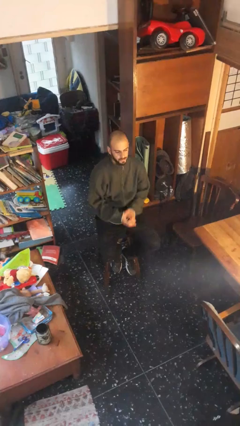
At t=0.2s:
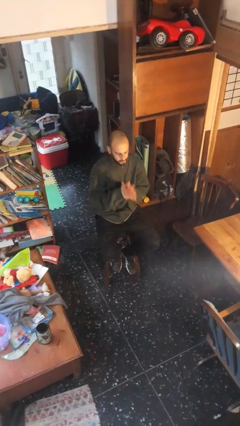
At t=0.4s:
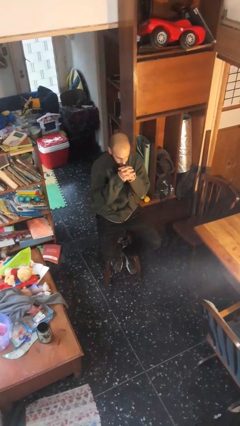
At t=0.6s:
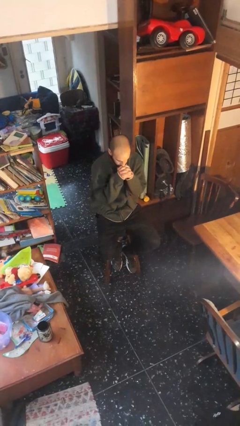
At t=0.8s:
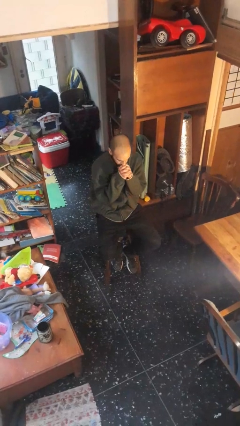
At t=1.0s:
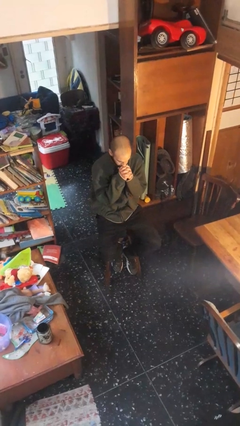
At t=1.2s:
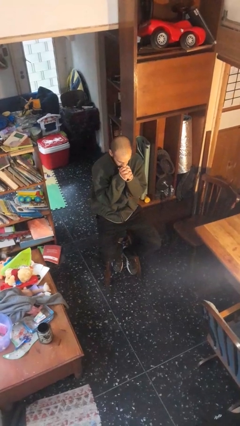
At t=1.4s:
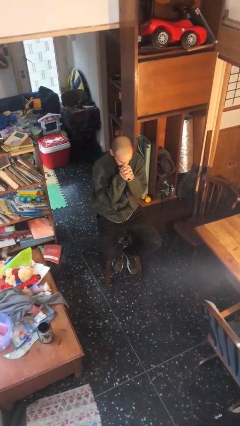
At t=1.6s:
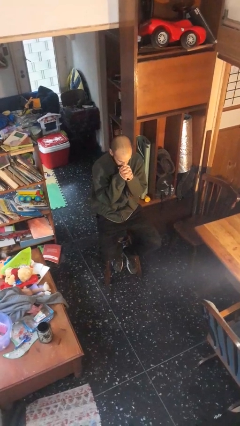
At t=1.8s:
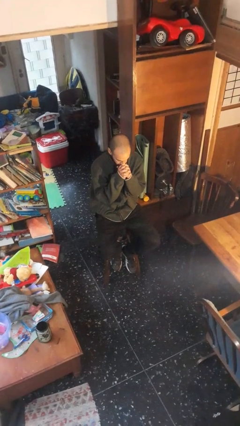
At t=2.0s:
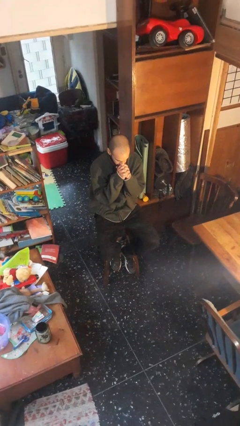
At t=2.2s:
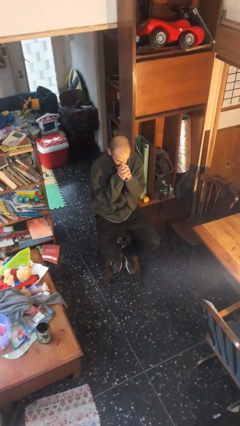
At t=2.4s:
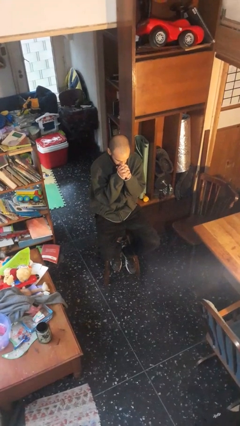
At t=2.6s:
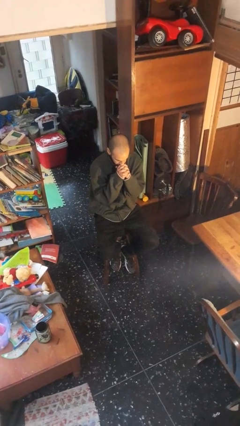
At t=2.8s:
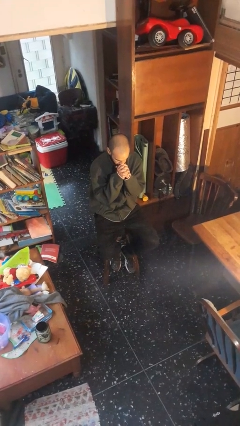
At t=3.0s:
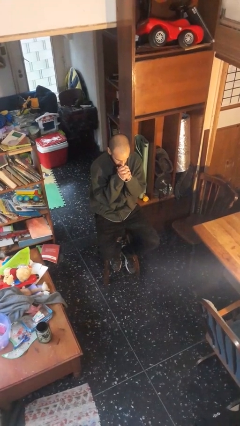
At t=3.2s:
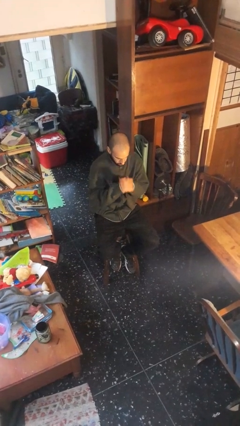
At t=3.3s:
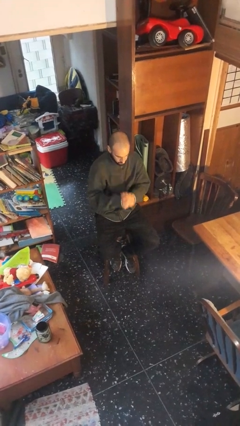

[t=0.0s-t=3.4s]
person prays

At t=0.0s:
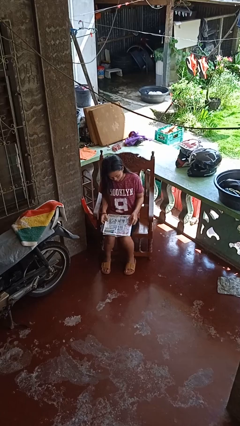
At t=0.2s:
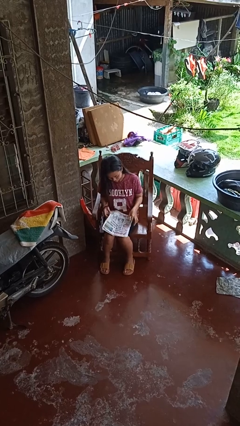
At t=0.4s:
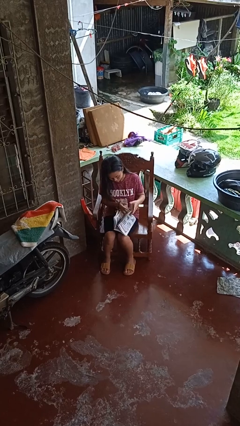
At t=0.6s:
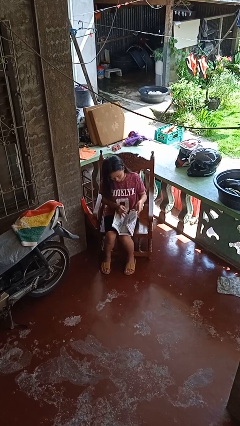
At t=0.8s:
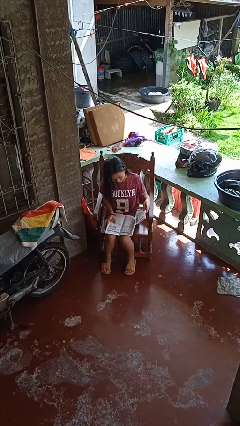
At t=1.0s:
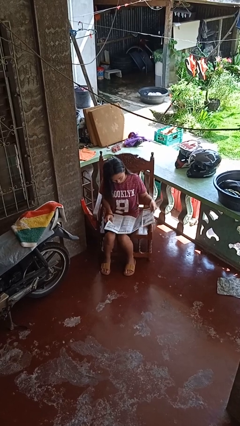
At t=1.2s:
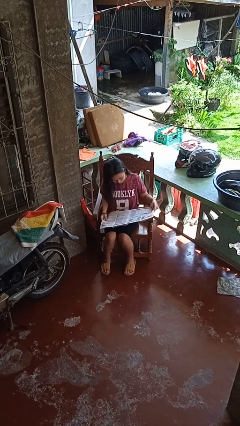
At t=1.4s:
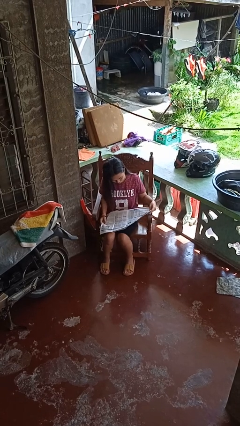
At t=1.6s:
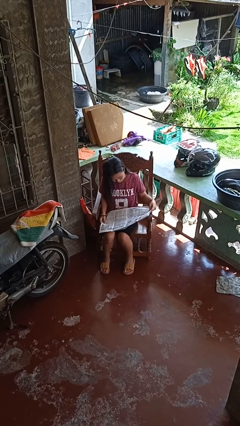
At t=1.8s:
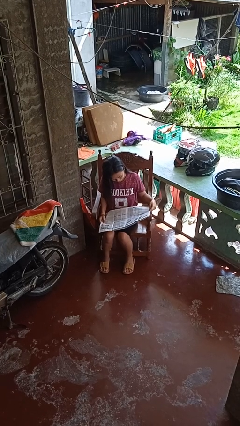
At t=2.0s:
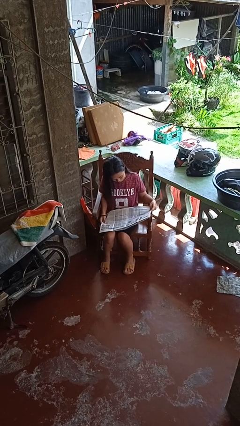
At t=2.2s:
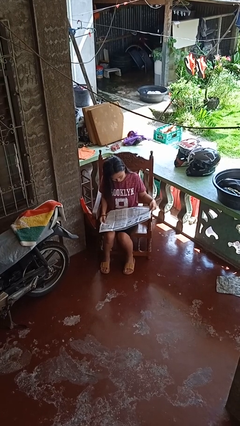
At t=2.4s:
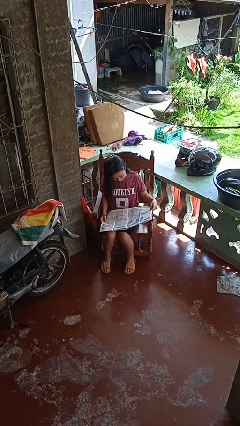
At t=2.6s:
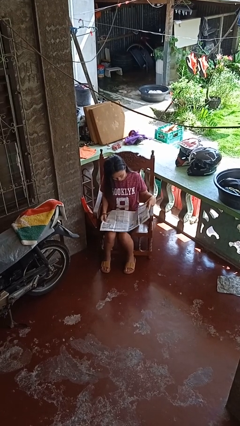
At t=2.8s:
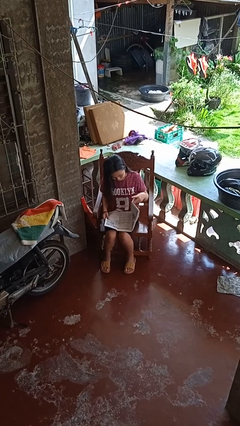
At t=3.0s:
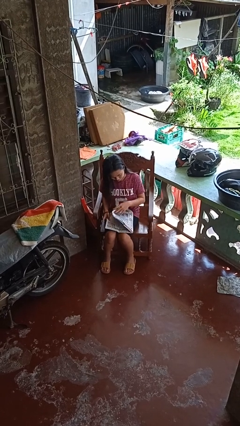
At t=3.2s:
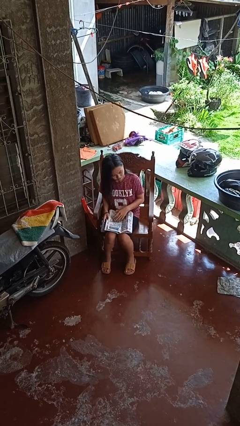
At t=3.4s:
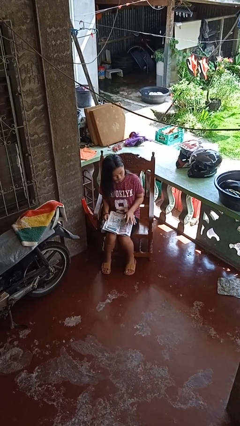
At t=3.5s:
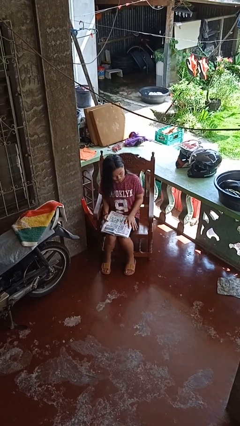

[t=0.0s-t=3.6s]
person reads newspaper

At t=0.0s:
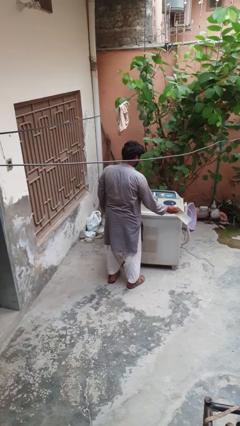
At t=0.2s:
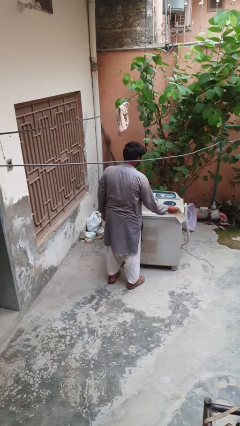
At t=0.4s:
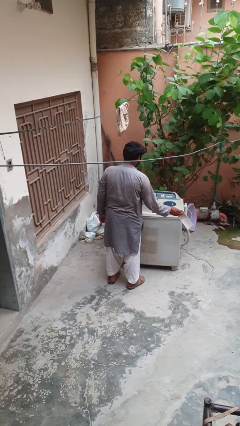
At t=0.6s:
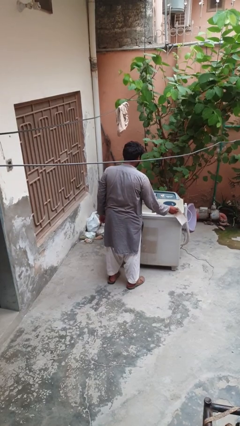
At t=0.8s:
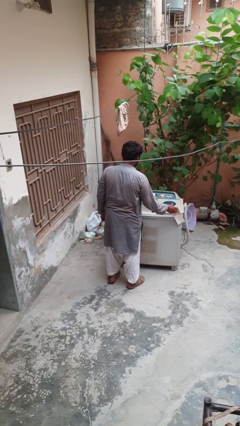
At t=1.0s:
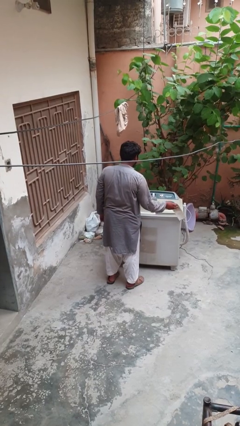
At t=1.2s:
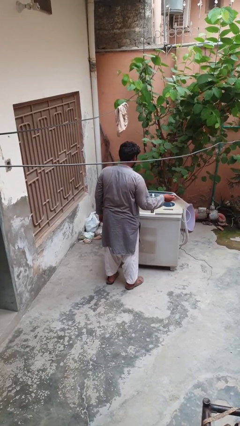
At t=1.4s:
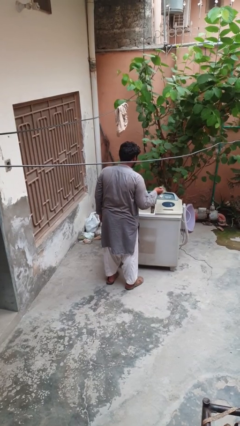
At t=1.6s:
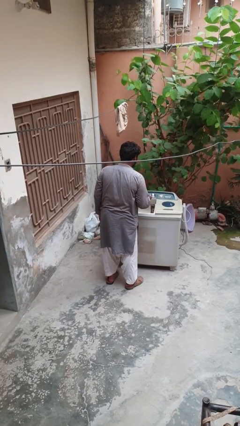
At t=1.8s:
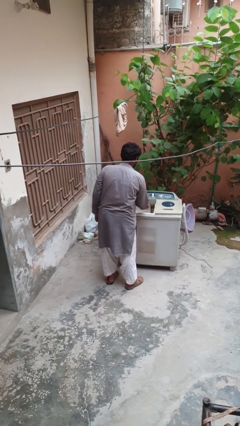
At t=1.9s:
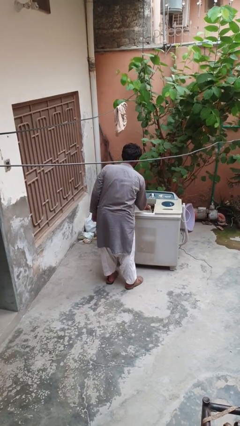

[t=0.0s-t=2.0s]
person cleans dryer lint trap

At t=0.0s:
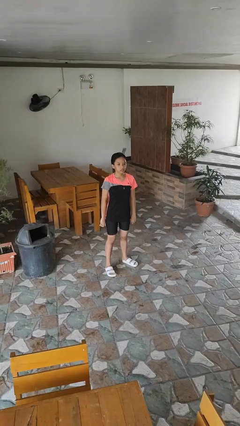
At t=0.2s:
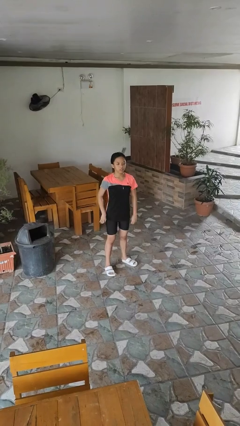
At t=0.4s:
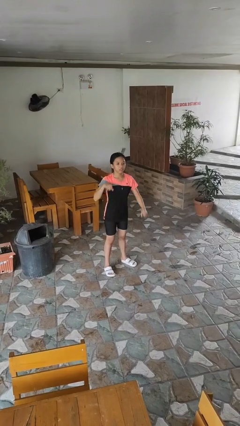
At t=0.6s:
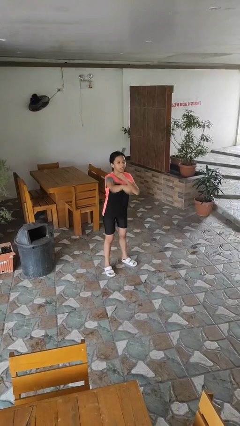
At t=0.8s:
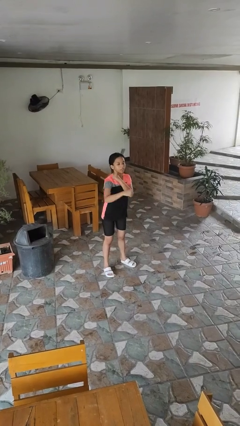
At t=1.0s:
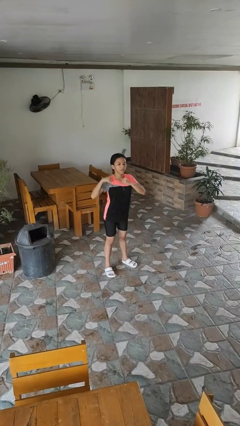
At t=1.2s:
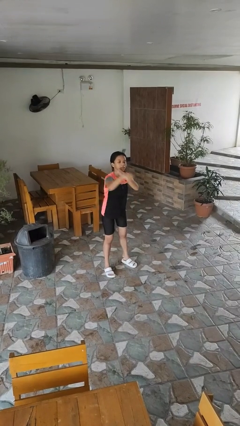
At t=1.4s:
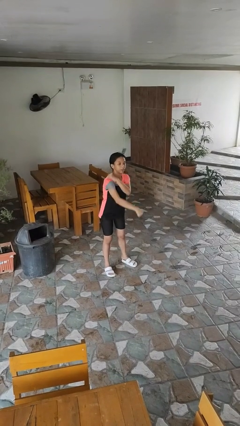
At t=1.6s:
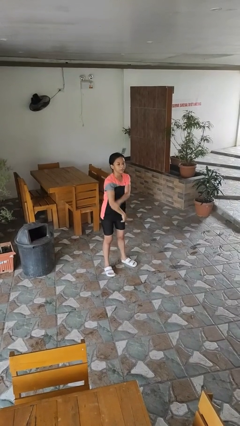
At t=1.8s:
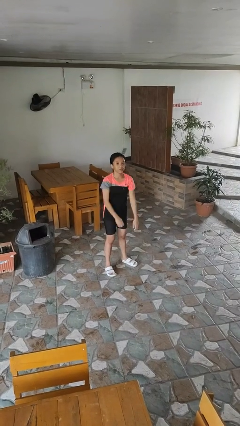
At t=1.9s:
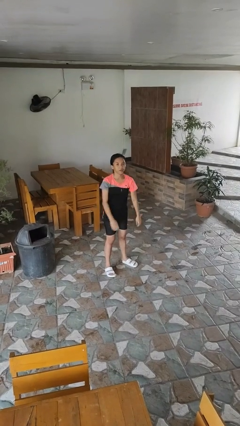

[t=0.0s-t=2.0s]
person punches

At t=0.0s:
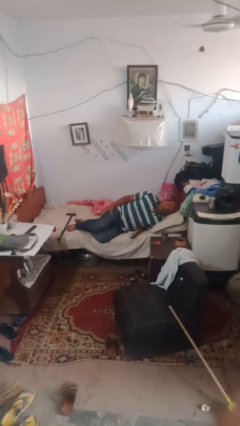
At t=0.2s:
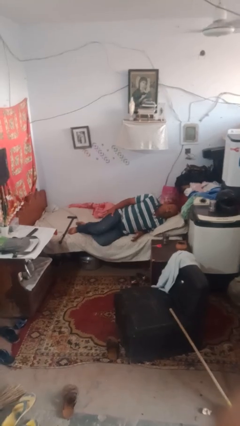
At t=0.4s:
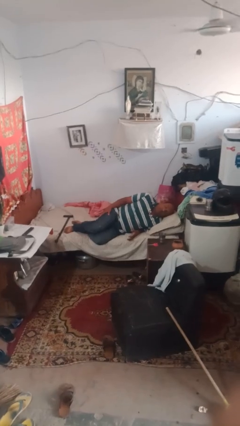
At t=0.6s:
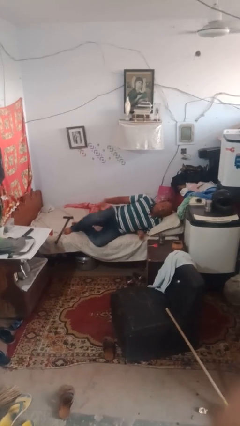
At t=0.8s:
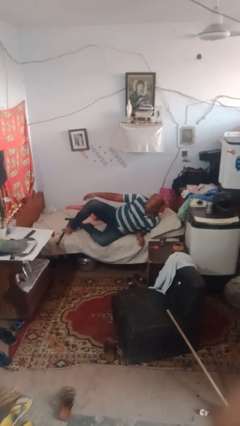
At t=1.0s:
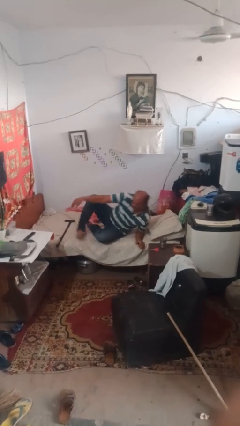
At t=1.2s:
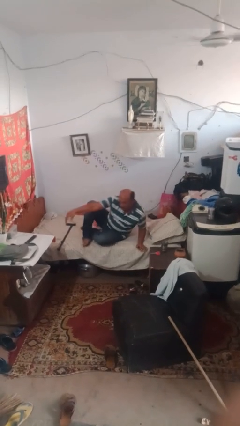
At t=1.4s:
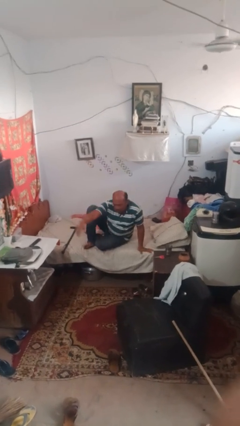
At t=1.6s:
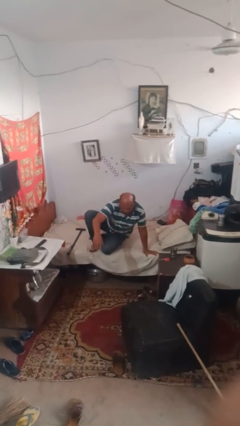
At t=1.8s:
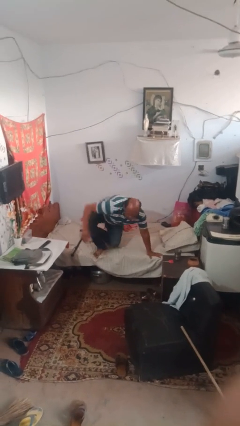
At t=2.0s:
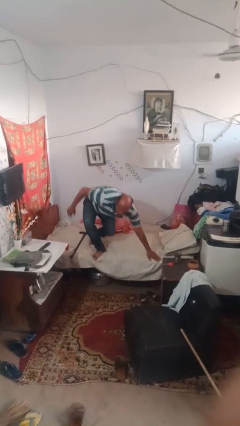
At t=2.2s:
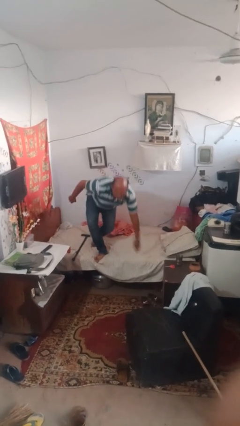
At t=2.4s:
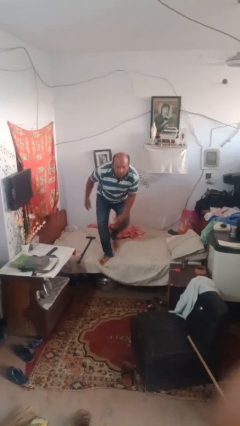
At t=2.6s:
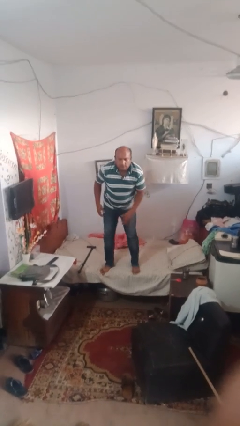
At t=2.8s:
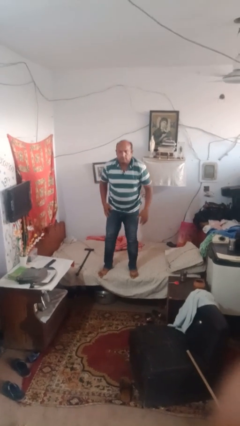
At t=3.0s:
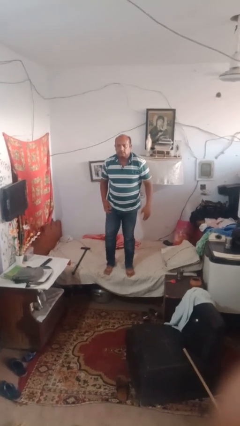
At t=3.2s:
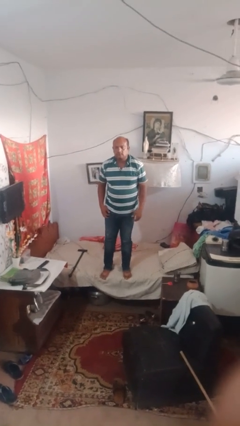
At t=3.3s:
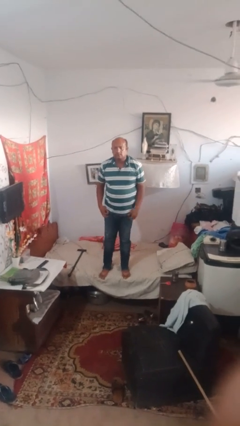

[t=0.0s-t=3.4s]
person stands up

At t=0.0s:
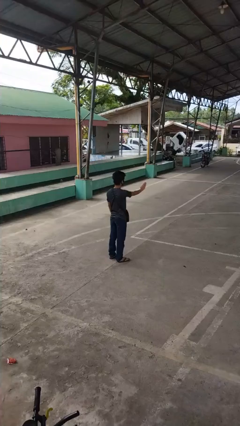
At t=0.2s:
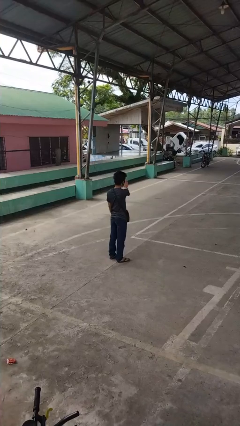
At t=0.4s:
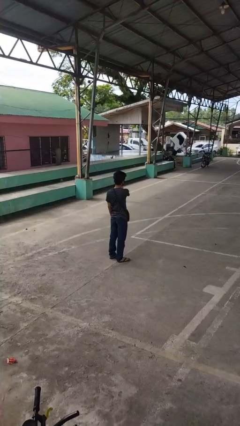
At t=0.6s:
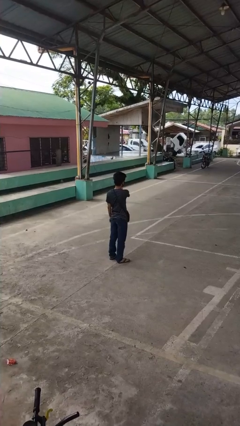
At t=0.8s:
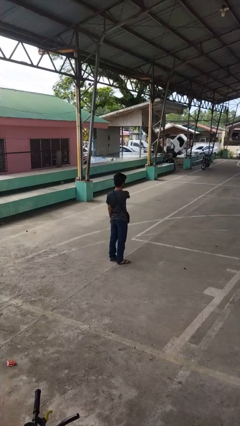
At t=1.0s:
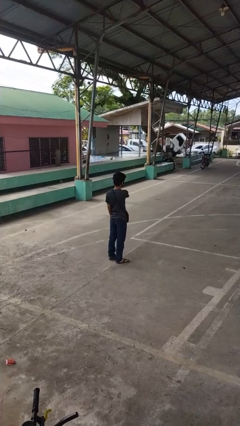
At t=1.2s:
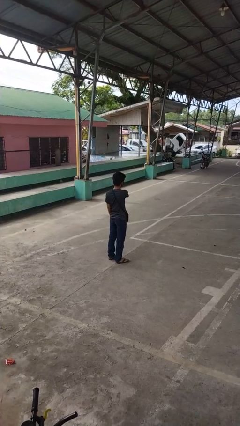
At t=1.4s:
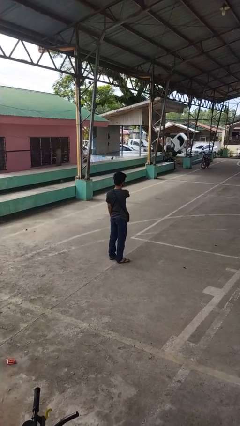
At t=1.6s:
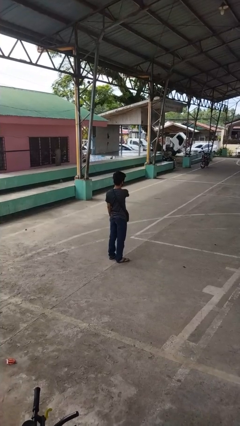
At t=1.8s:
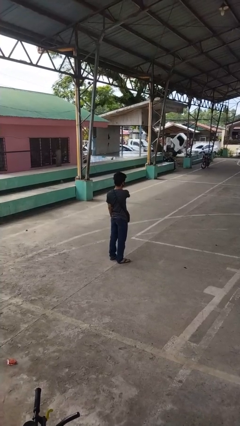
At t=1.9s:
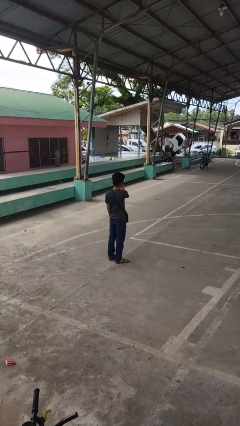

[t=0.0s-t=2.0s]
person gestures swipe left

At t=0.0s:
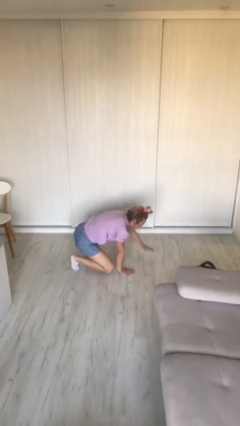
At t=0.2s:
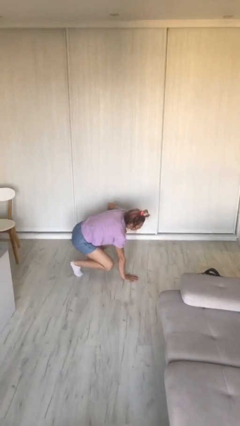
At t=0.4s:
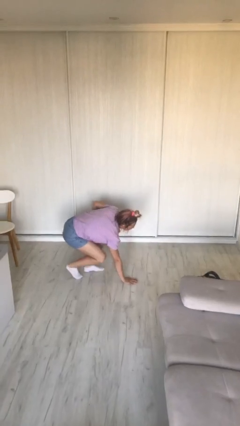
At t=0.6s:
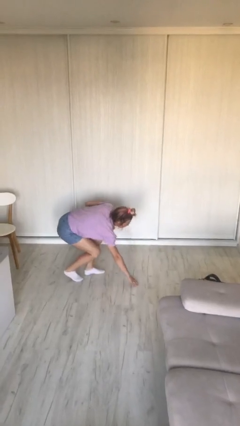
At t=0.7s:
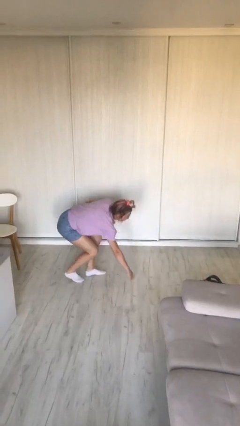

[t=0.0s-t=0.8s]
person stands up from floor
